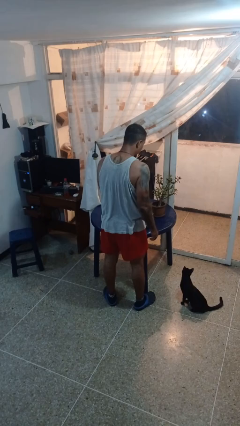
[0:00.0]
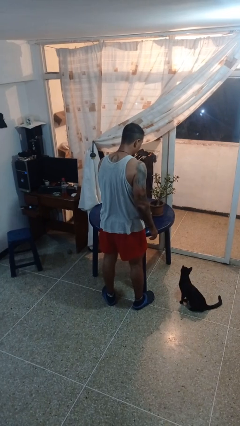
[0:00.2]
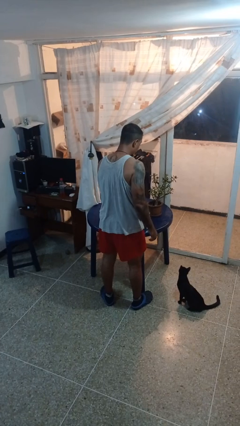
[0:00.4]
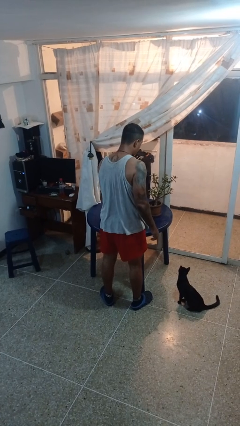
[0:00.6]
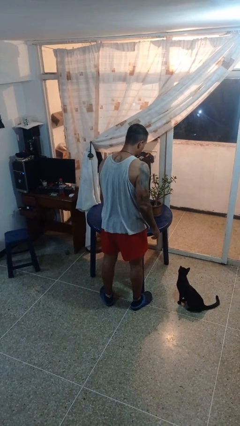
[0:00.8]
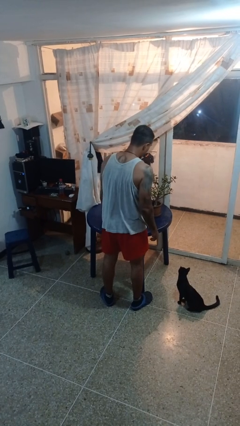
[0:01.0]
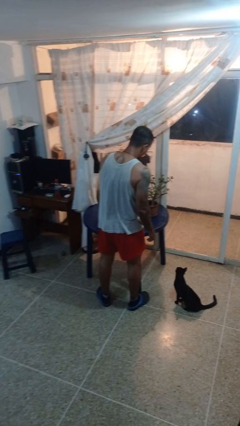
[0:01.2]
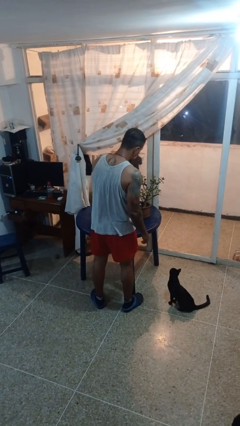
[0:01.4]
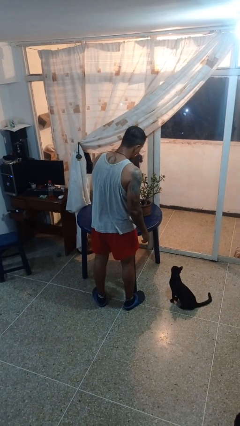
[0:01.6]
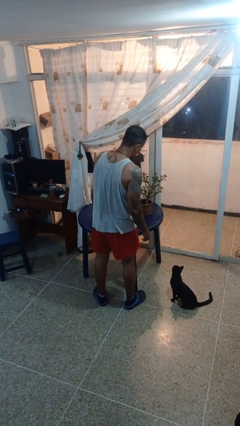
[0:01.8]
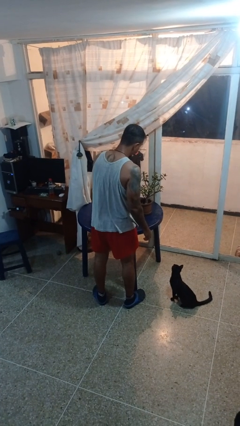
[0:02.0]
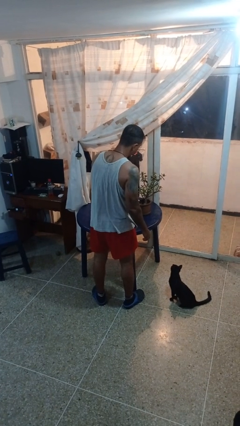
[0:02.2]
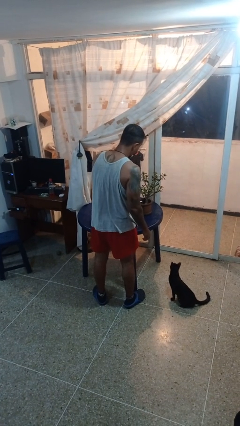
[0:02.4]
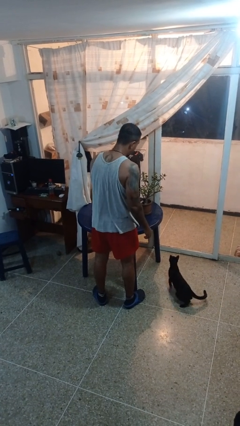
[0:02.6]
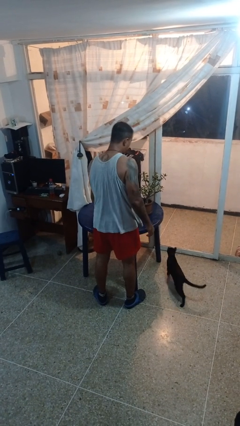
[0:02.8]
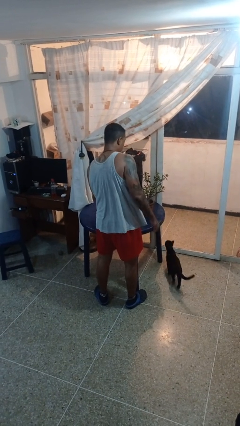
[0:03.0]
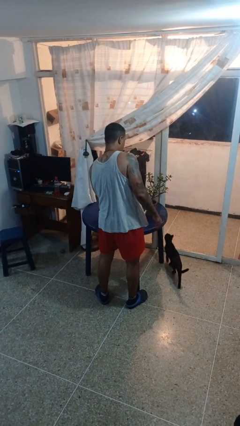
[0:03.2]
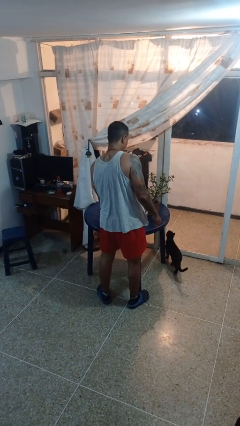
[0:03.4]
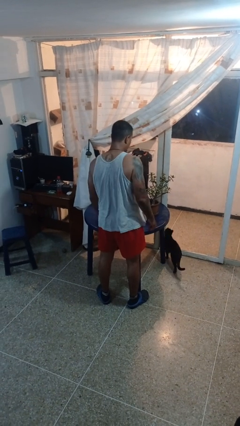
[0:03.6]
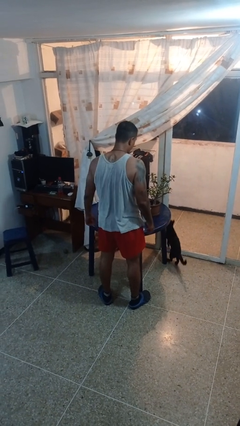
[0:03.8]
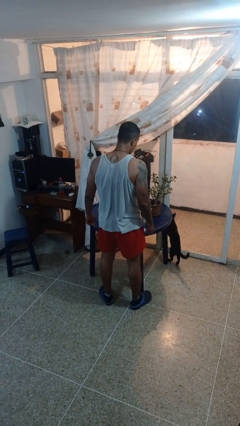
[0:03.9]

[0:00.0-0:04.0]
person waters houseplant

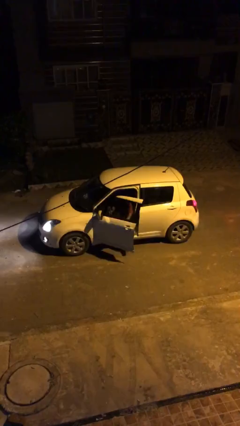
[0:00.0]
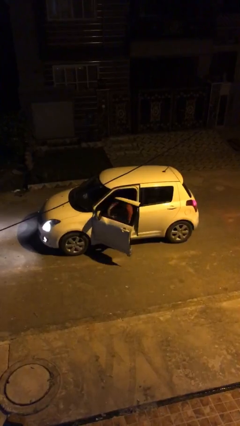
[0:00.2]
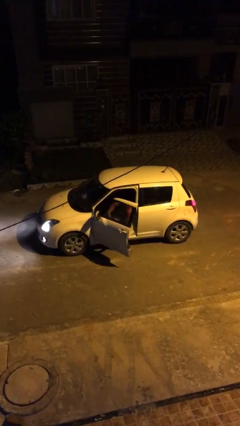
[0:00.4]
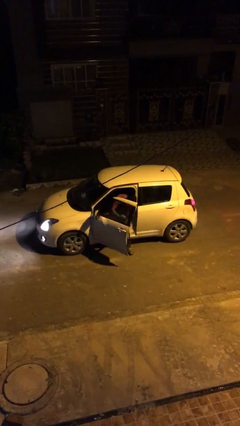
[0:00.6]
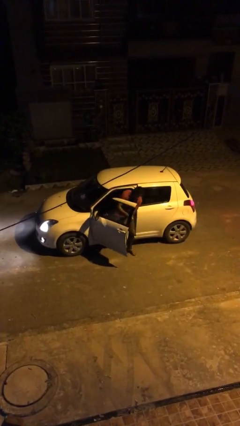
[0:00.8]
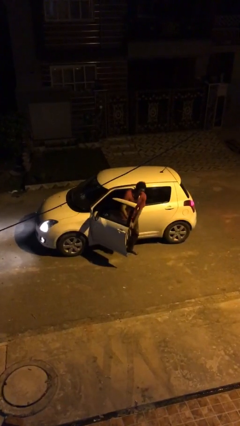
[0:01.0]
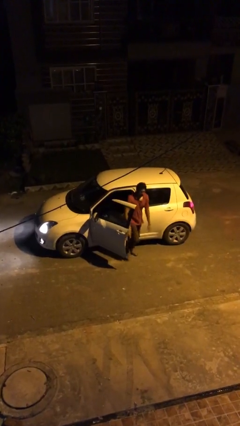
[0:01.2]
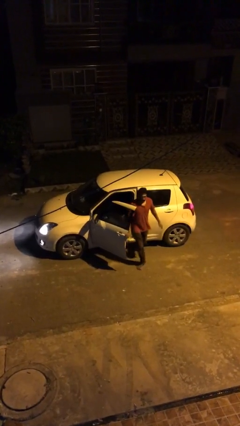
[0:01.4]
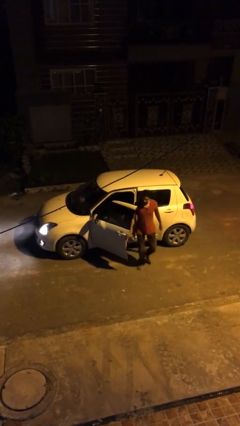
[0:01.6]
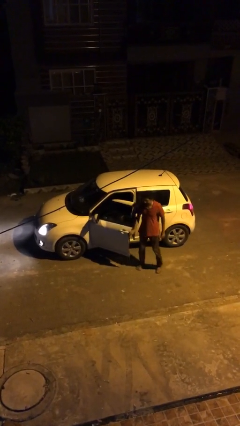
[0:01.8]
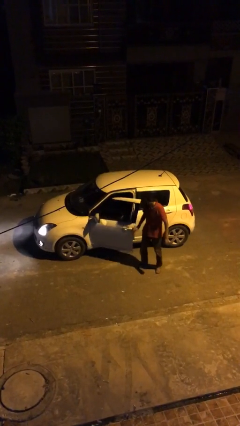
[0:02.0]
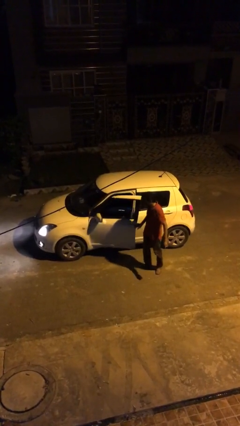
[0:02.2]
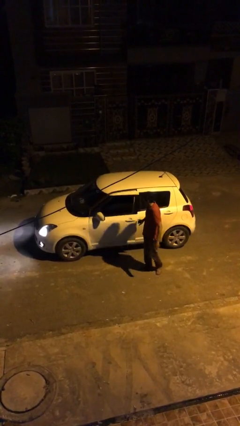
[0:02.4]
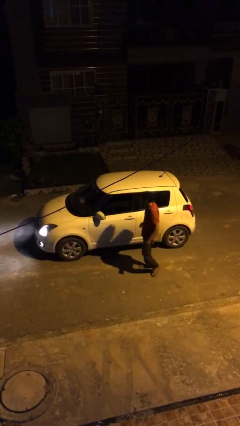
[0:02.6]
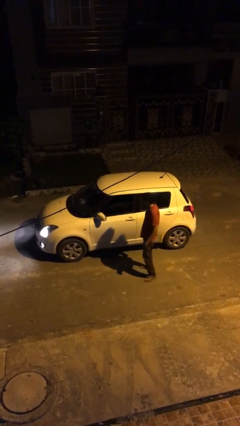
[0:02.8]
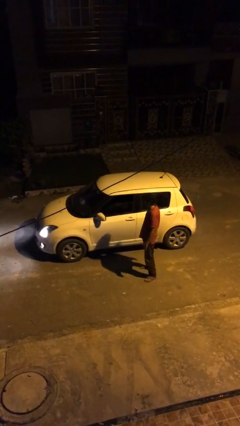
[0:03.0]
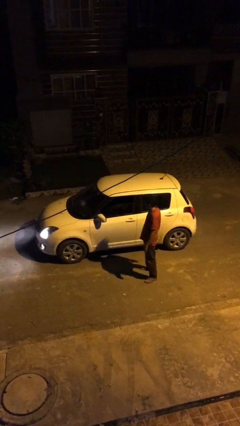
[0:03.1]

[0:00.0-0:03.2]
car drops off person

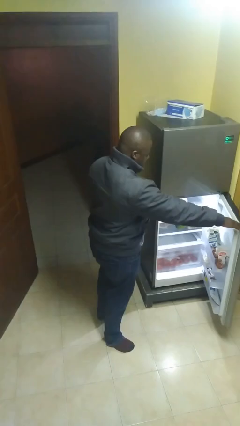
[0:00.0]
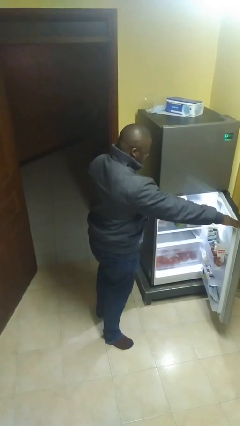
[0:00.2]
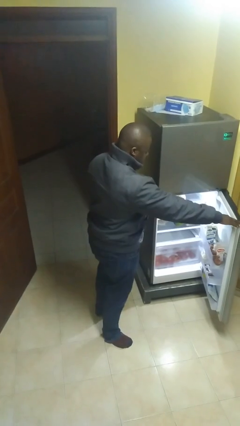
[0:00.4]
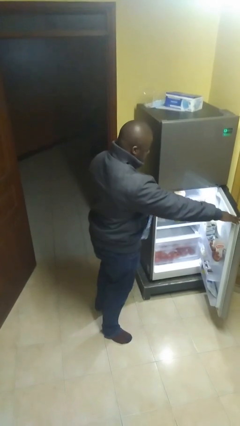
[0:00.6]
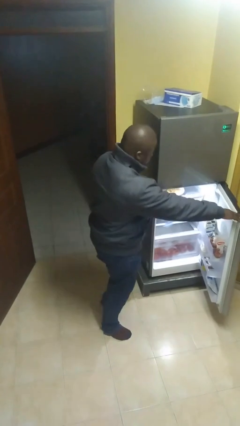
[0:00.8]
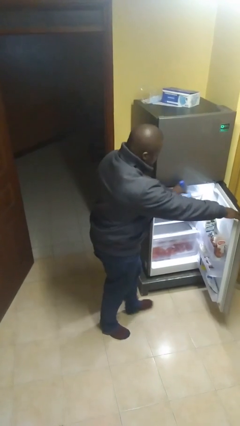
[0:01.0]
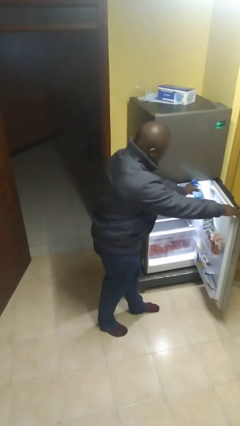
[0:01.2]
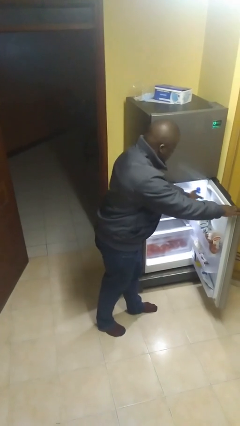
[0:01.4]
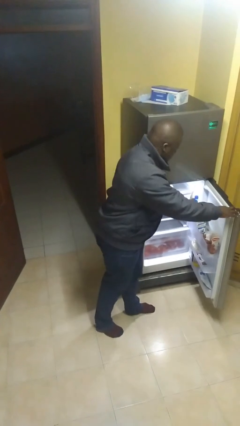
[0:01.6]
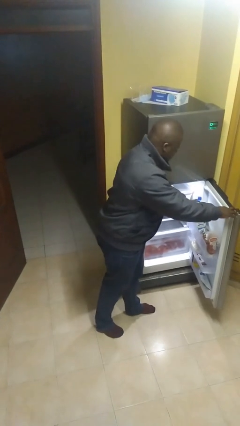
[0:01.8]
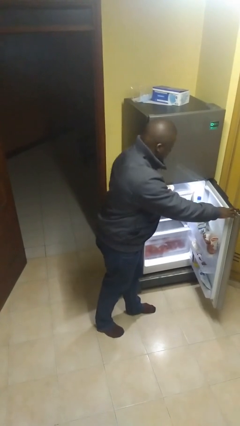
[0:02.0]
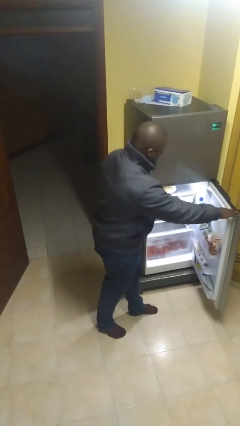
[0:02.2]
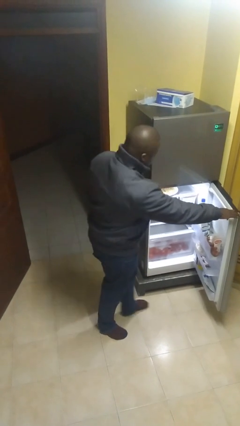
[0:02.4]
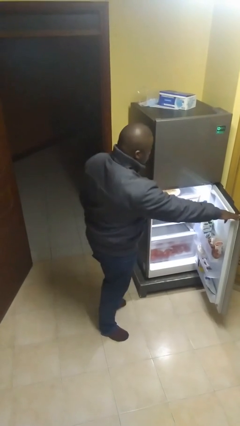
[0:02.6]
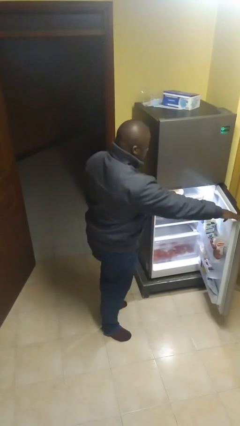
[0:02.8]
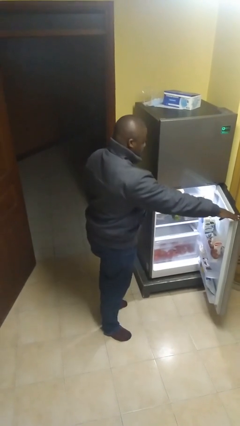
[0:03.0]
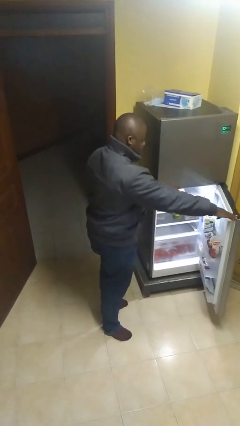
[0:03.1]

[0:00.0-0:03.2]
person puts object into refrigerator

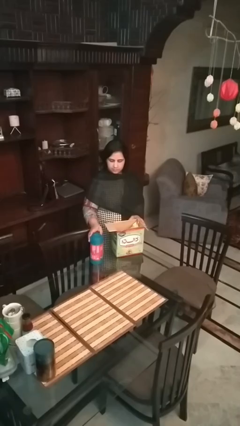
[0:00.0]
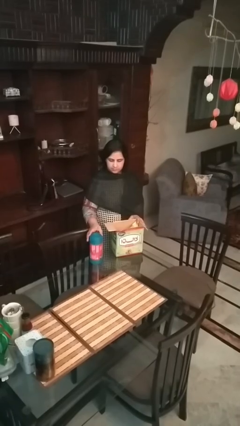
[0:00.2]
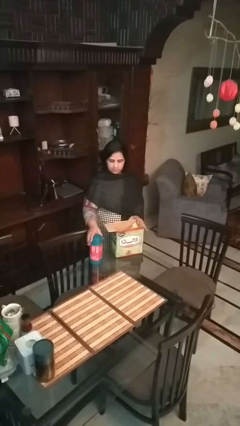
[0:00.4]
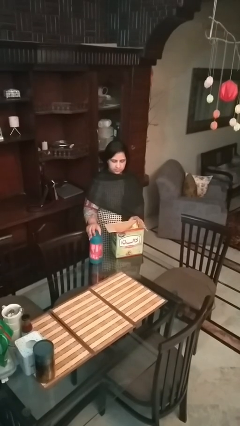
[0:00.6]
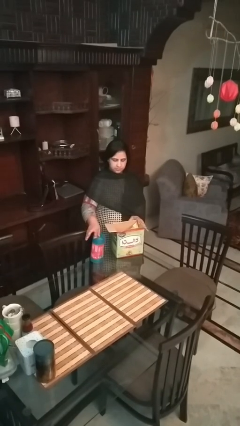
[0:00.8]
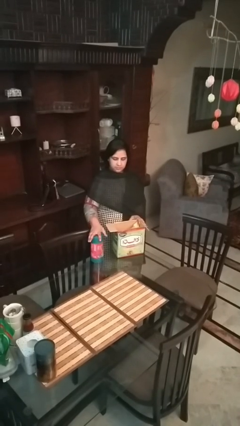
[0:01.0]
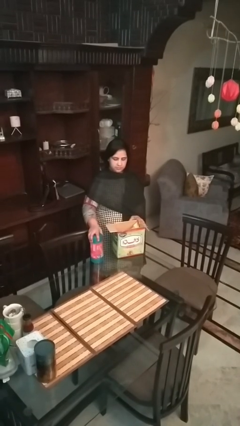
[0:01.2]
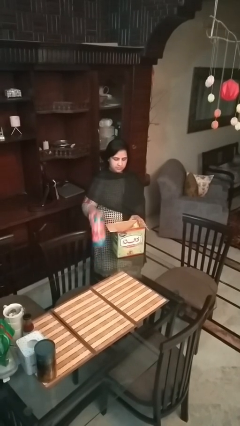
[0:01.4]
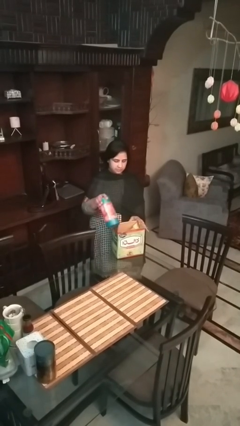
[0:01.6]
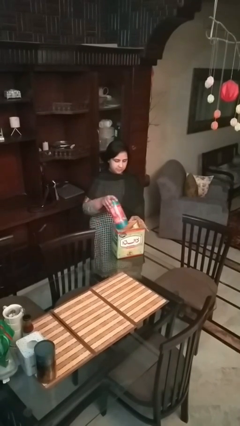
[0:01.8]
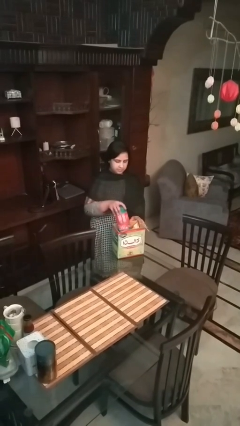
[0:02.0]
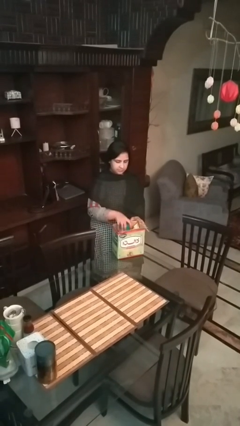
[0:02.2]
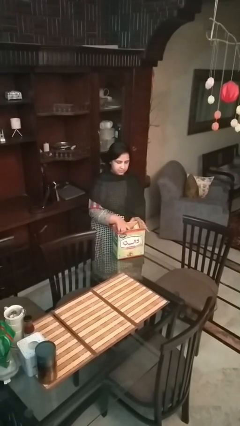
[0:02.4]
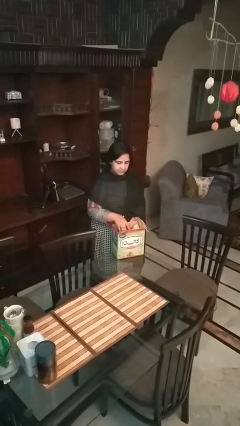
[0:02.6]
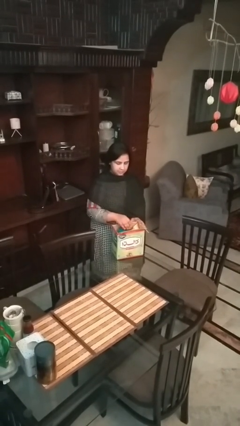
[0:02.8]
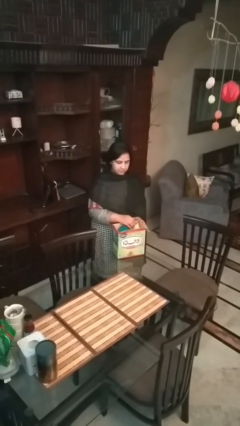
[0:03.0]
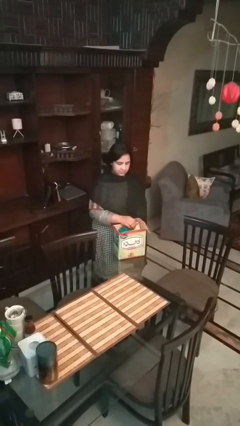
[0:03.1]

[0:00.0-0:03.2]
person puts object into box

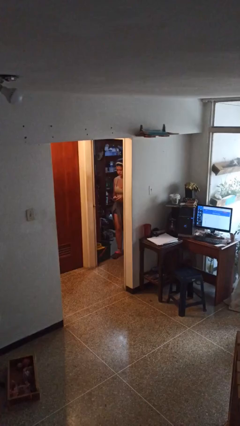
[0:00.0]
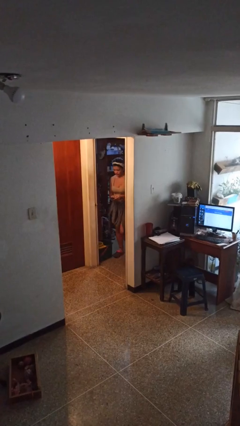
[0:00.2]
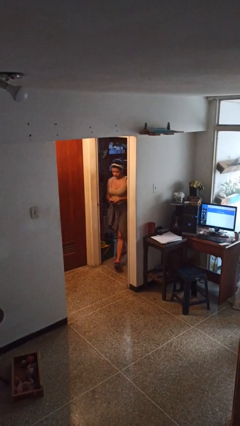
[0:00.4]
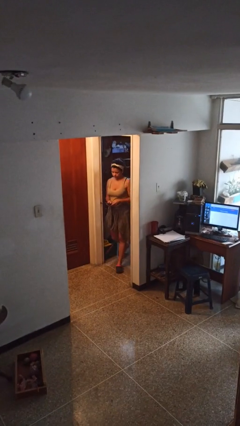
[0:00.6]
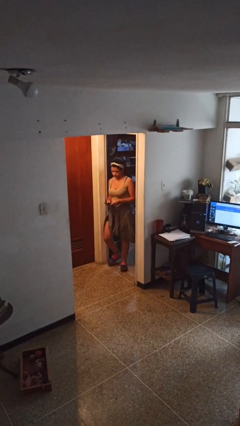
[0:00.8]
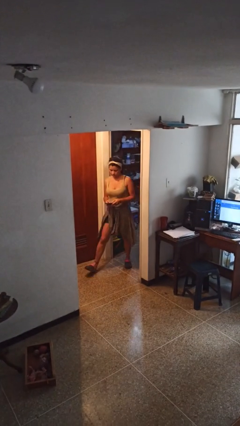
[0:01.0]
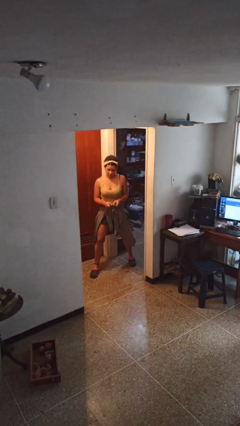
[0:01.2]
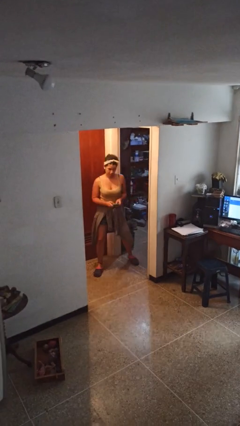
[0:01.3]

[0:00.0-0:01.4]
person enters scene through structure

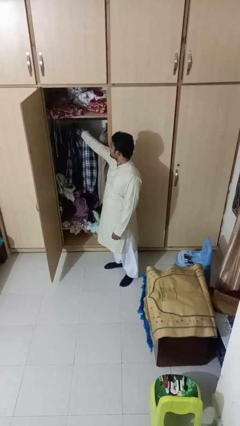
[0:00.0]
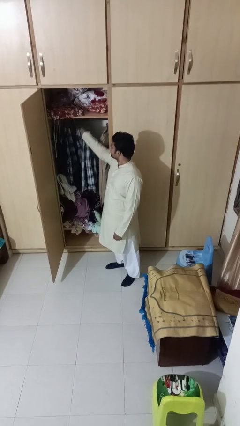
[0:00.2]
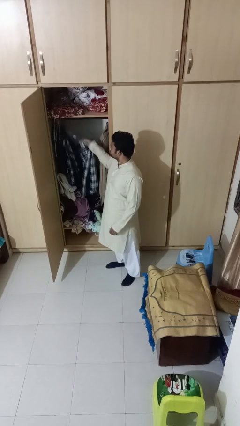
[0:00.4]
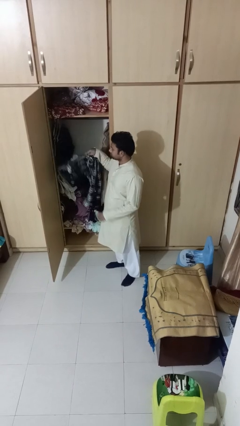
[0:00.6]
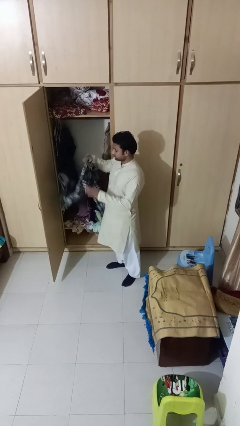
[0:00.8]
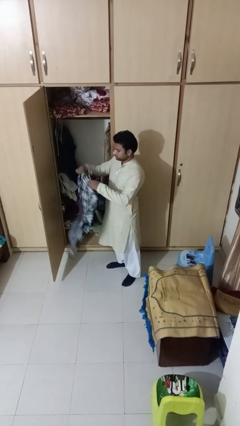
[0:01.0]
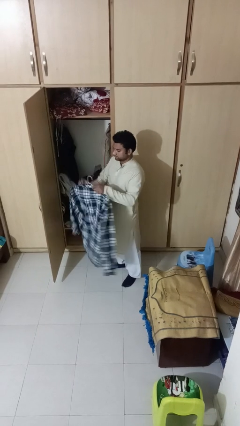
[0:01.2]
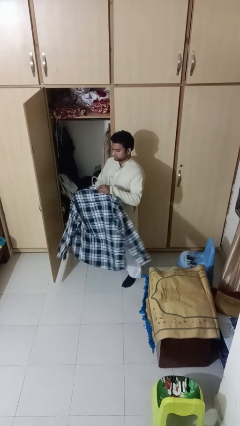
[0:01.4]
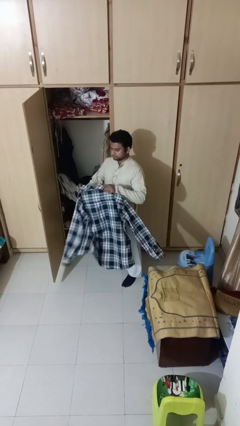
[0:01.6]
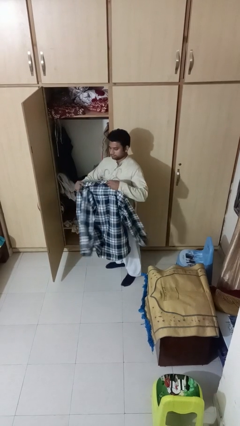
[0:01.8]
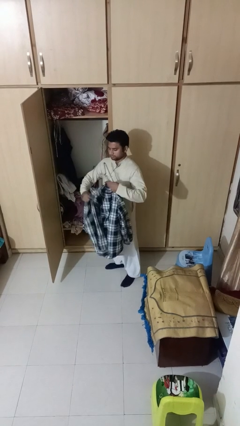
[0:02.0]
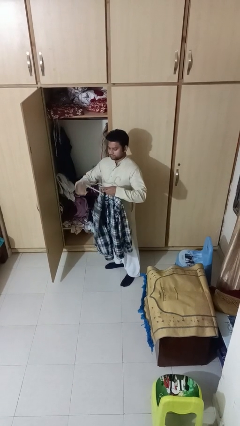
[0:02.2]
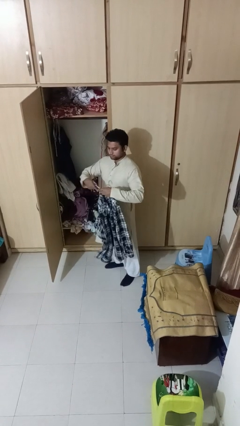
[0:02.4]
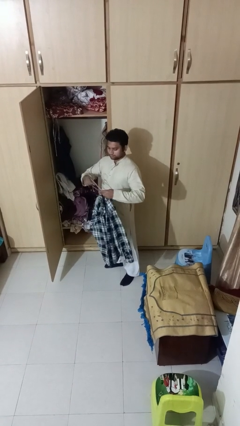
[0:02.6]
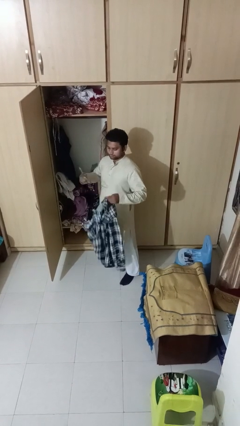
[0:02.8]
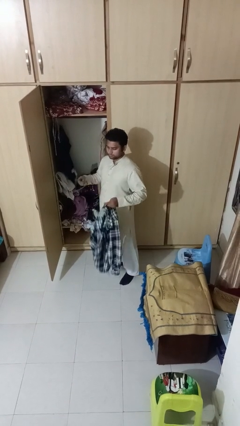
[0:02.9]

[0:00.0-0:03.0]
person takes clothes from closet
